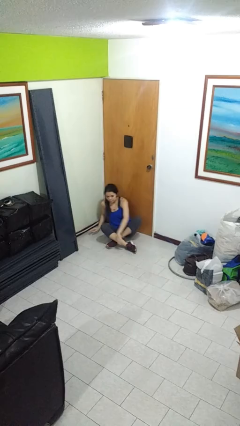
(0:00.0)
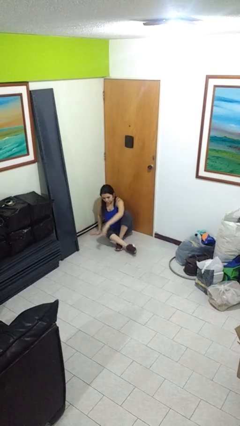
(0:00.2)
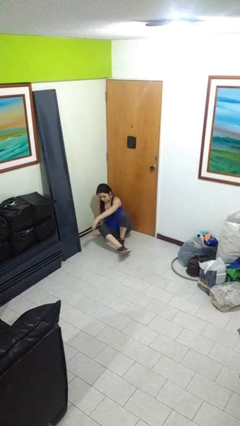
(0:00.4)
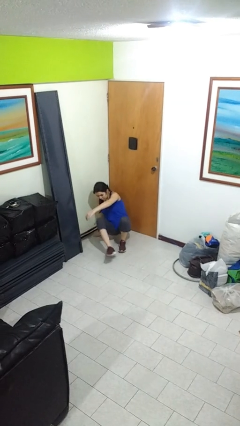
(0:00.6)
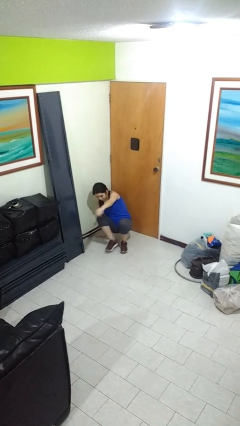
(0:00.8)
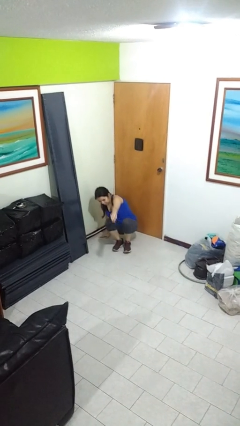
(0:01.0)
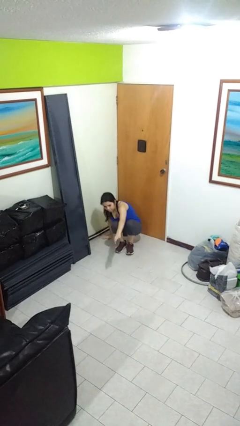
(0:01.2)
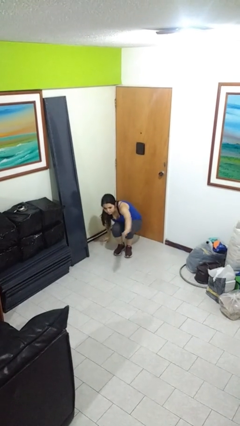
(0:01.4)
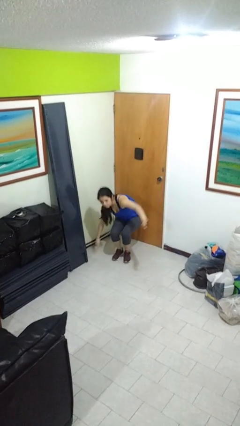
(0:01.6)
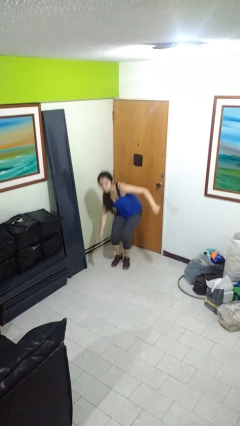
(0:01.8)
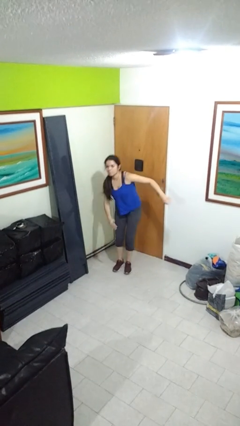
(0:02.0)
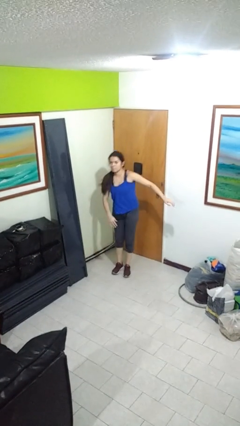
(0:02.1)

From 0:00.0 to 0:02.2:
person stands up from floor

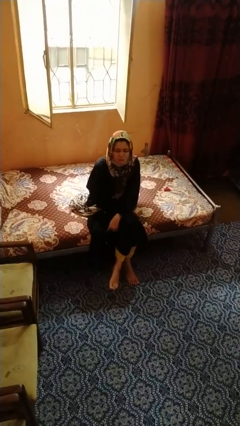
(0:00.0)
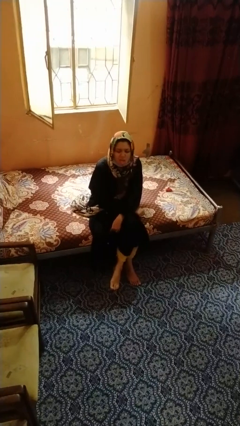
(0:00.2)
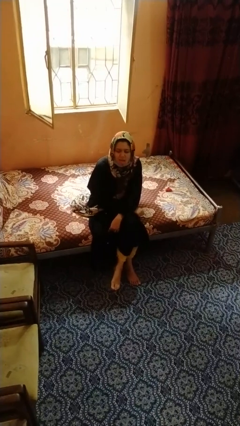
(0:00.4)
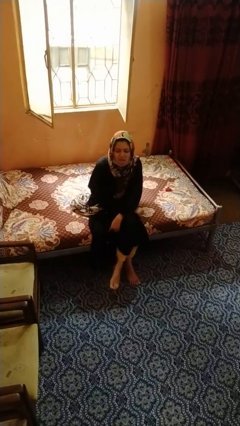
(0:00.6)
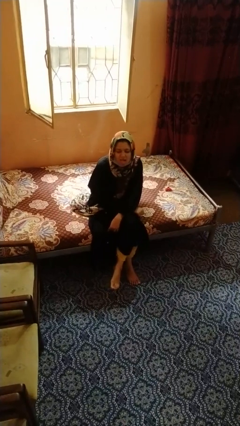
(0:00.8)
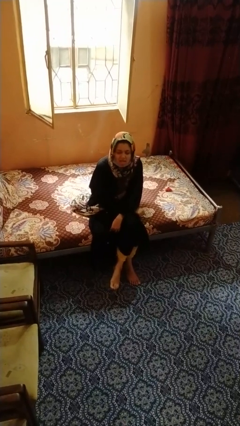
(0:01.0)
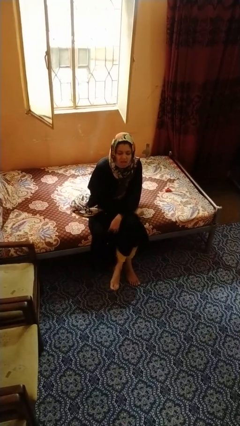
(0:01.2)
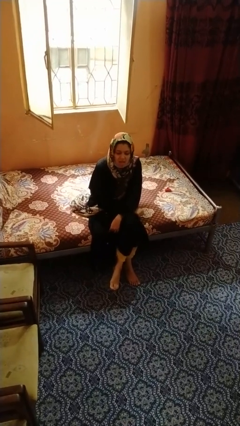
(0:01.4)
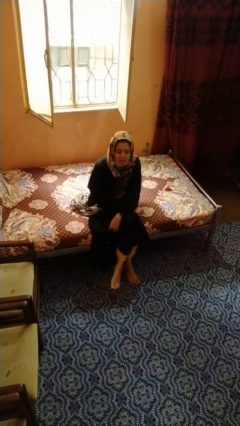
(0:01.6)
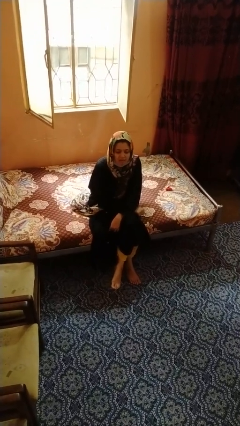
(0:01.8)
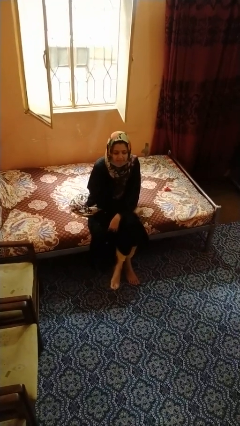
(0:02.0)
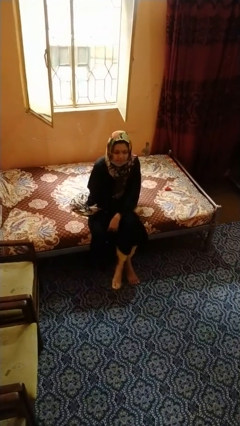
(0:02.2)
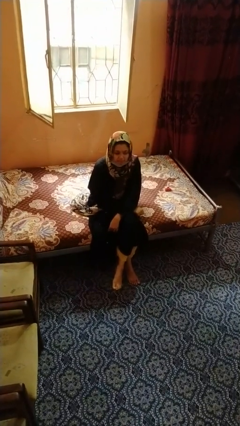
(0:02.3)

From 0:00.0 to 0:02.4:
person sticks out tongue

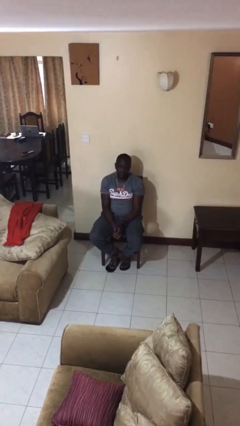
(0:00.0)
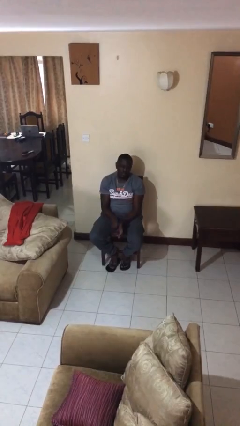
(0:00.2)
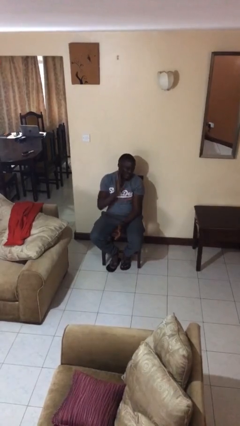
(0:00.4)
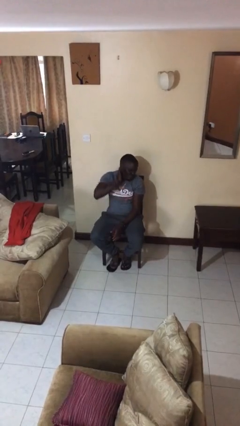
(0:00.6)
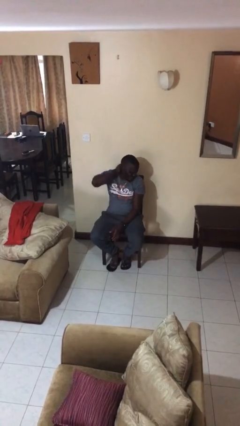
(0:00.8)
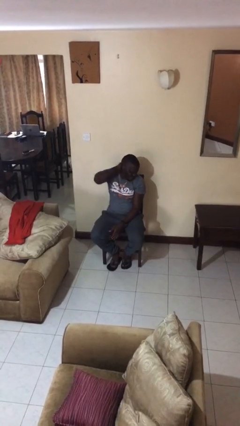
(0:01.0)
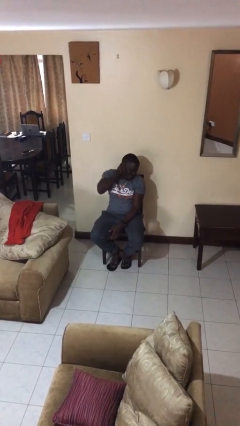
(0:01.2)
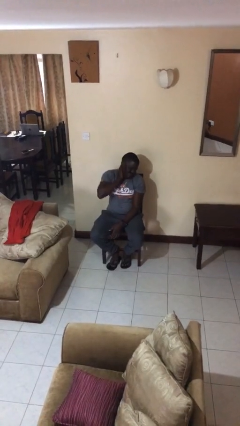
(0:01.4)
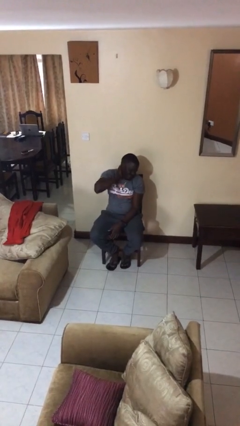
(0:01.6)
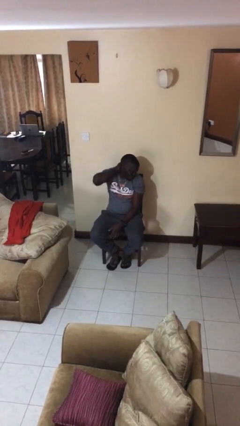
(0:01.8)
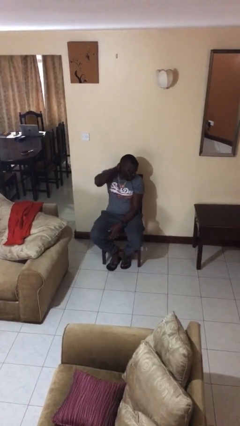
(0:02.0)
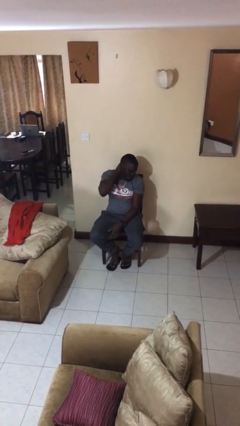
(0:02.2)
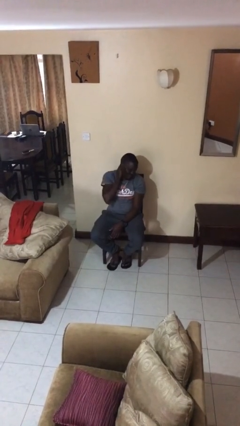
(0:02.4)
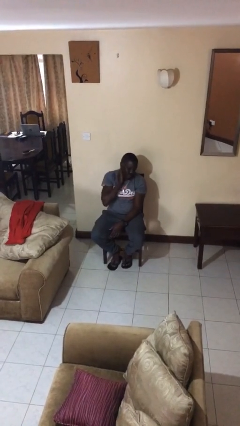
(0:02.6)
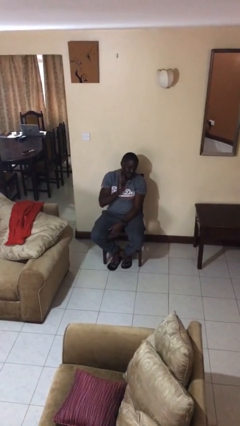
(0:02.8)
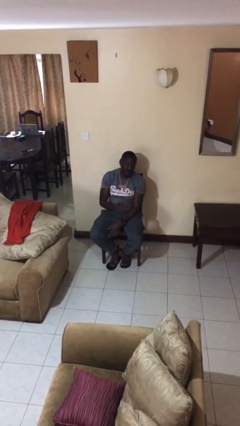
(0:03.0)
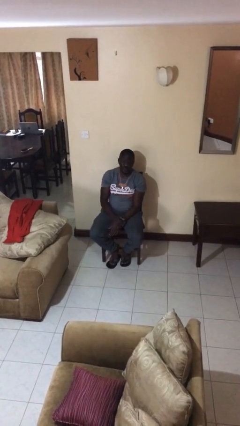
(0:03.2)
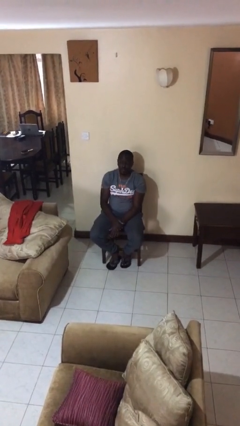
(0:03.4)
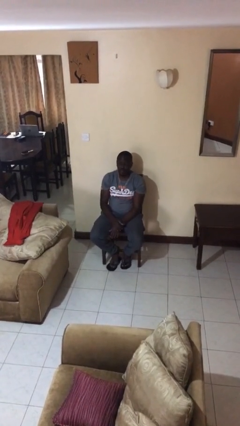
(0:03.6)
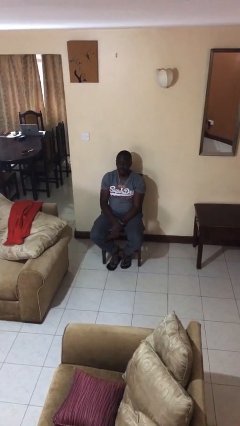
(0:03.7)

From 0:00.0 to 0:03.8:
person rubs neck

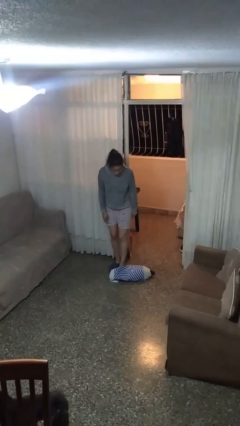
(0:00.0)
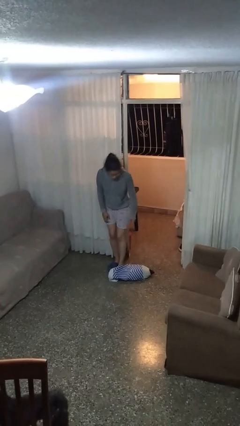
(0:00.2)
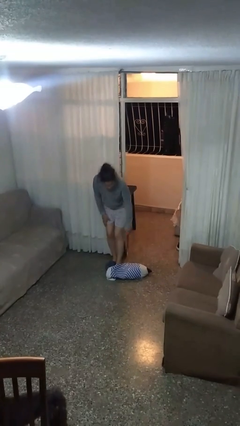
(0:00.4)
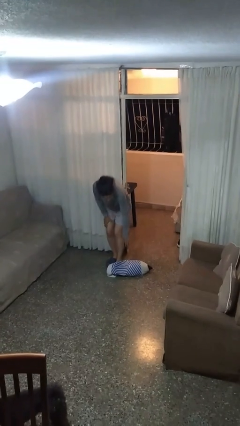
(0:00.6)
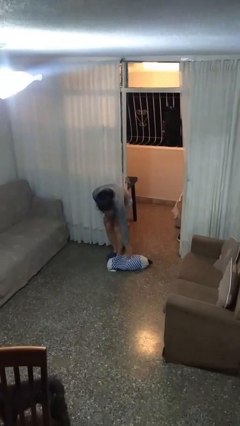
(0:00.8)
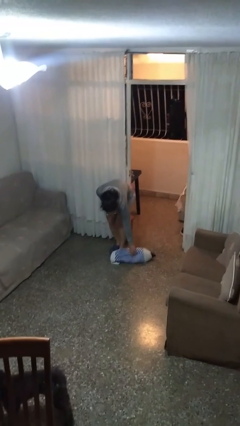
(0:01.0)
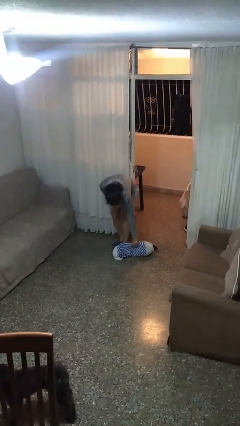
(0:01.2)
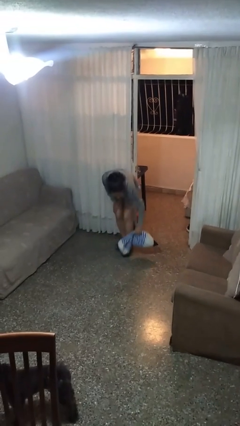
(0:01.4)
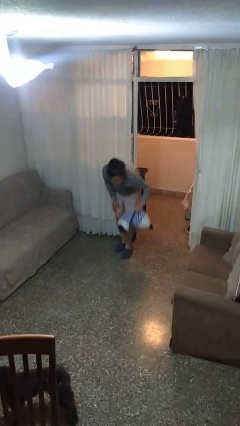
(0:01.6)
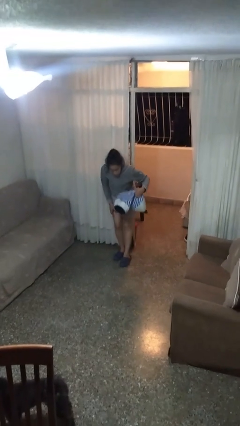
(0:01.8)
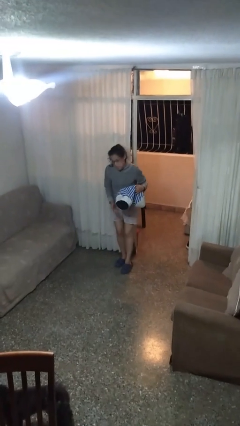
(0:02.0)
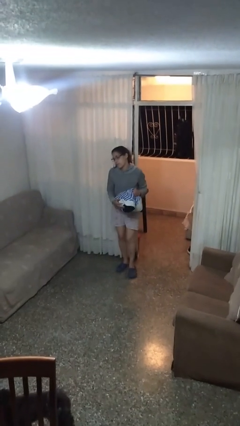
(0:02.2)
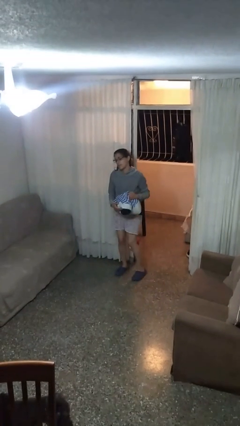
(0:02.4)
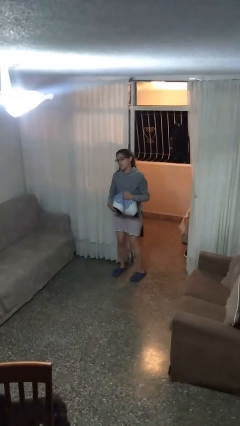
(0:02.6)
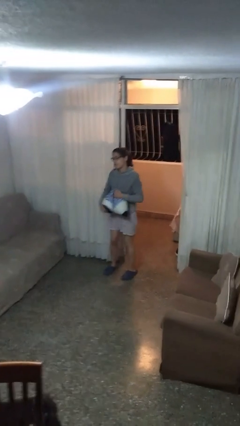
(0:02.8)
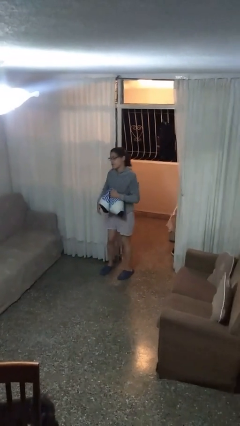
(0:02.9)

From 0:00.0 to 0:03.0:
person picks up object from floor

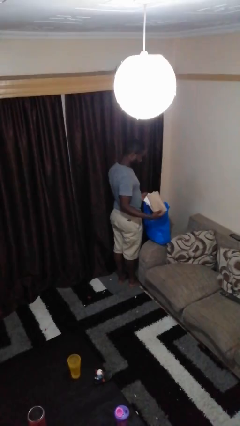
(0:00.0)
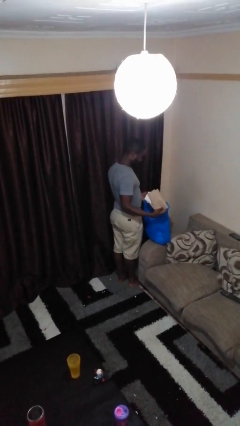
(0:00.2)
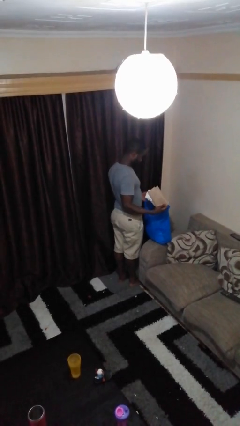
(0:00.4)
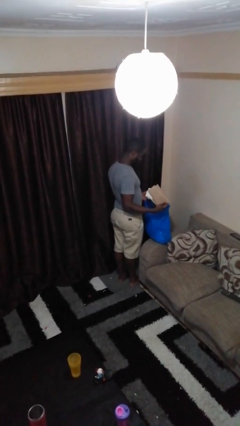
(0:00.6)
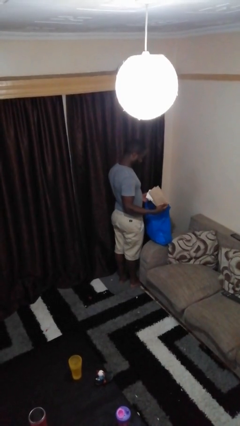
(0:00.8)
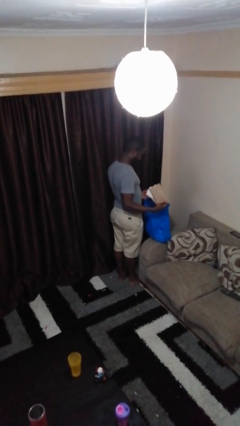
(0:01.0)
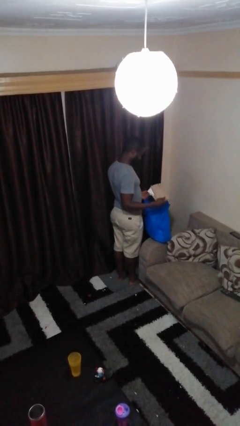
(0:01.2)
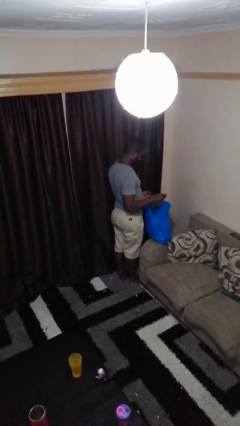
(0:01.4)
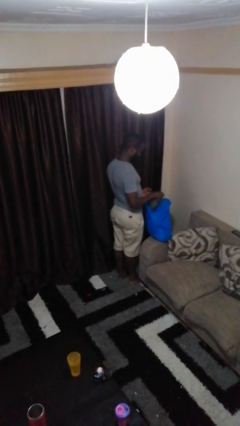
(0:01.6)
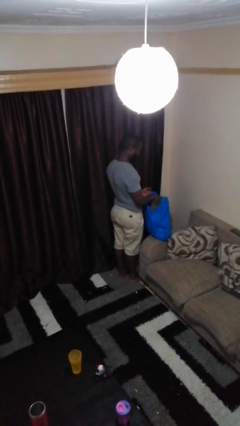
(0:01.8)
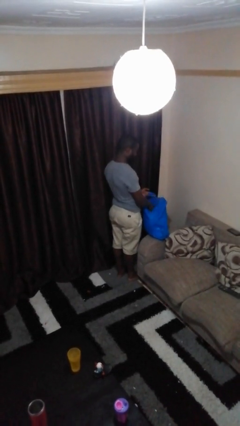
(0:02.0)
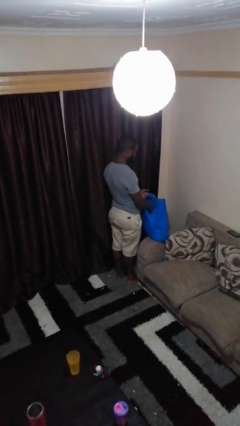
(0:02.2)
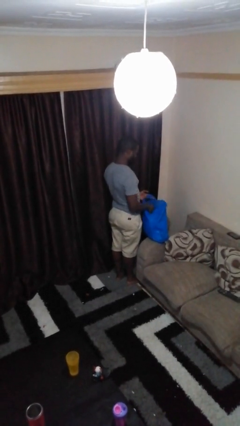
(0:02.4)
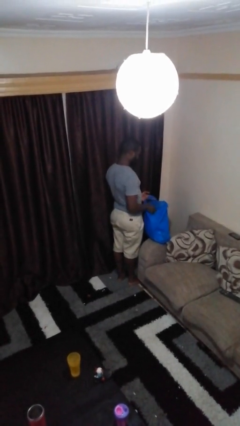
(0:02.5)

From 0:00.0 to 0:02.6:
person puts object into bag

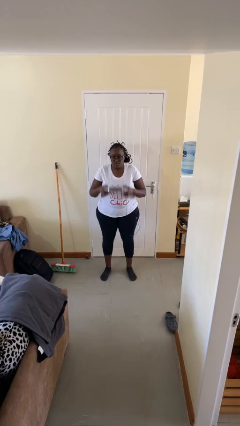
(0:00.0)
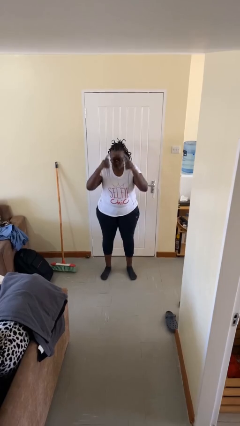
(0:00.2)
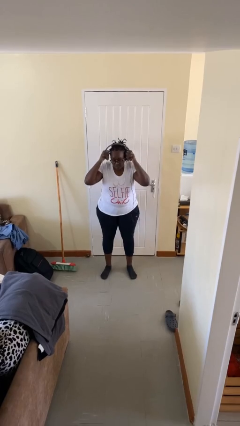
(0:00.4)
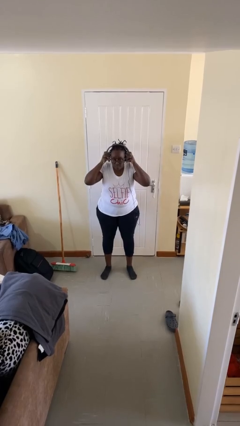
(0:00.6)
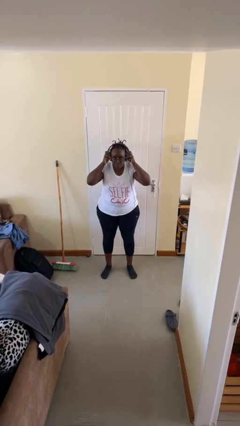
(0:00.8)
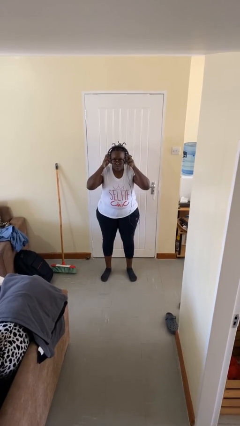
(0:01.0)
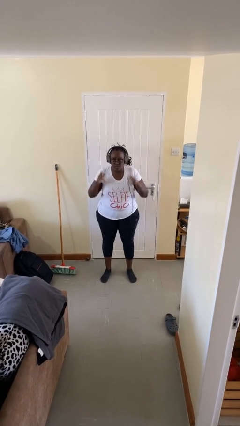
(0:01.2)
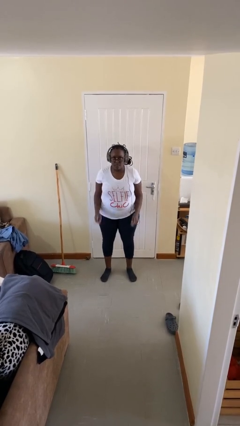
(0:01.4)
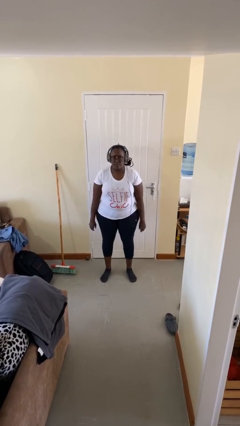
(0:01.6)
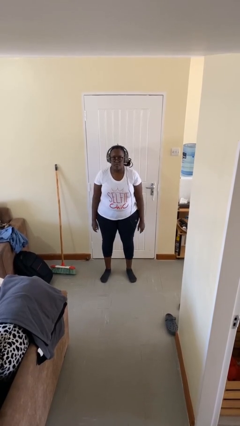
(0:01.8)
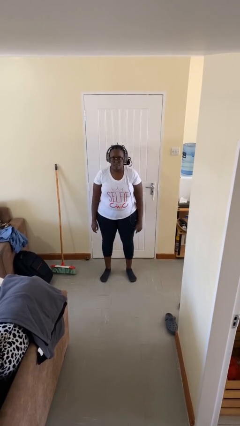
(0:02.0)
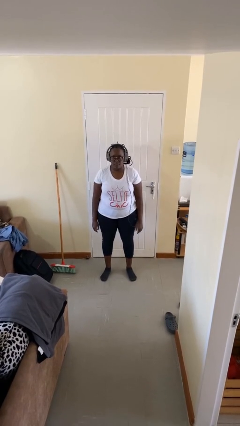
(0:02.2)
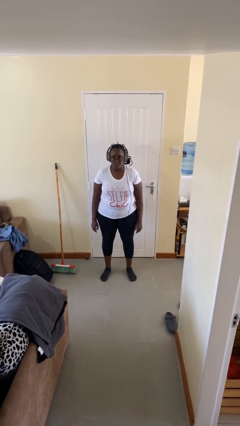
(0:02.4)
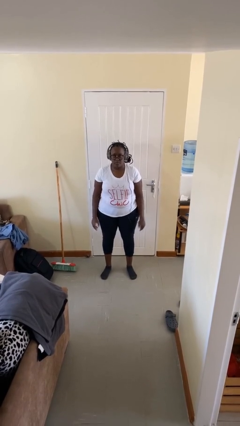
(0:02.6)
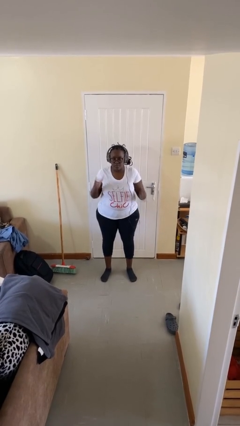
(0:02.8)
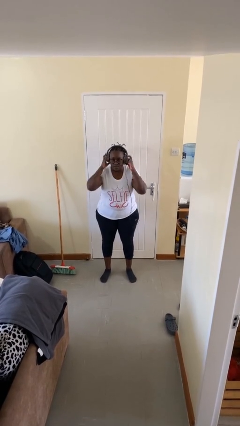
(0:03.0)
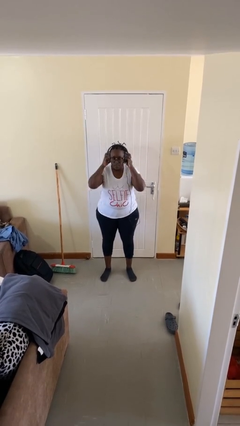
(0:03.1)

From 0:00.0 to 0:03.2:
person puts on headphones
